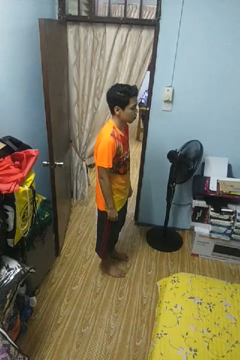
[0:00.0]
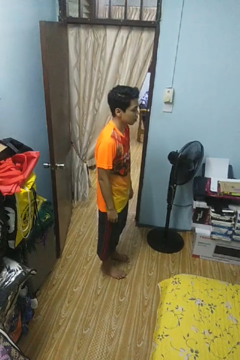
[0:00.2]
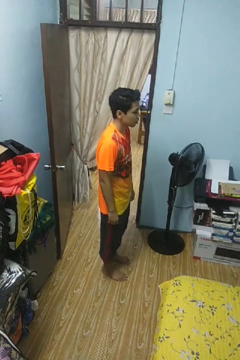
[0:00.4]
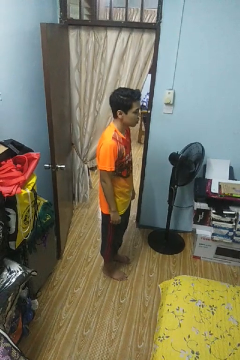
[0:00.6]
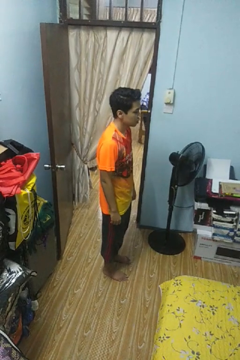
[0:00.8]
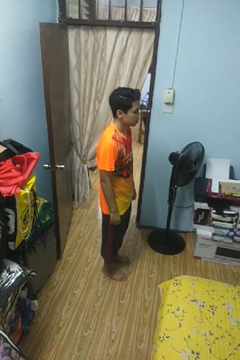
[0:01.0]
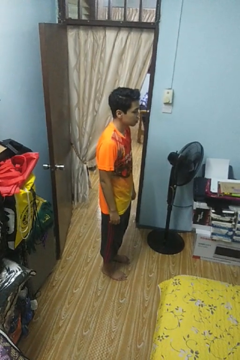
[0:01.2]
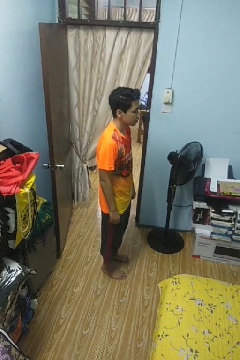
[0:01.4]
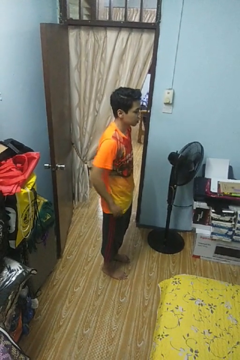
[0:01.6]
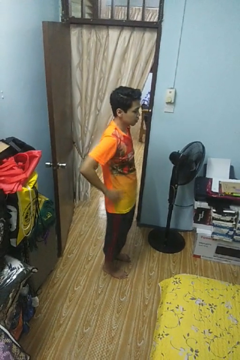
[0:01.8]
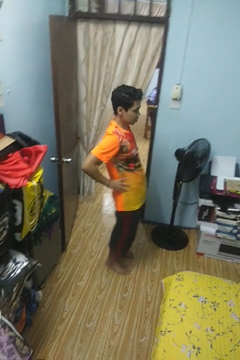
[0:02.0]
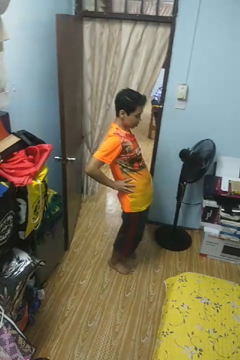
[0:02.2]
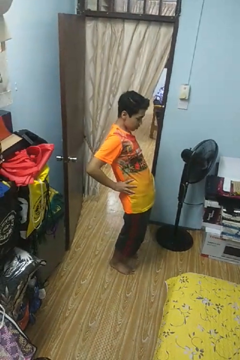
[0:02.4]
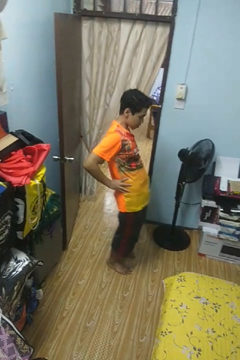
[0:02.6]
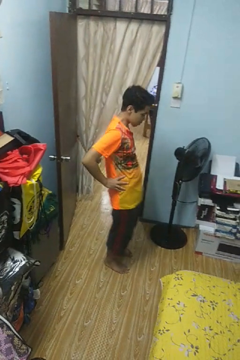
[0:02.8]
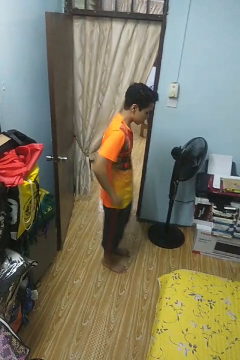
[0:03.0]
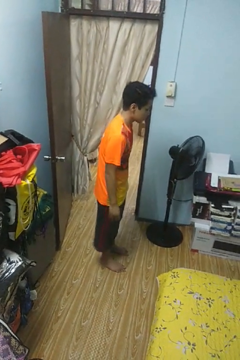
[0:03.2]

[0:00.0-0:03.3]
person stretches back

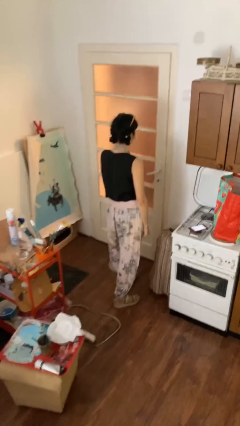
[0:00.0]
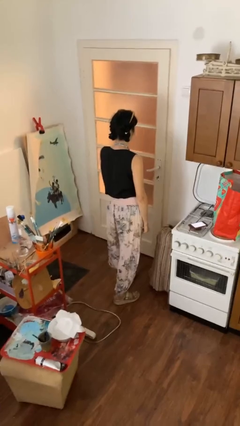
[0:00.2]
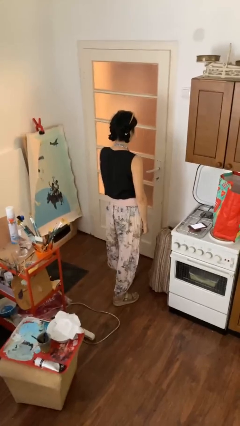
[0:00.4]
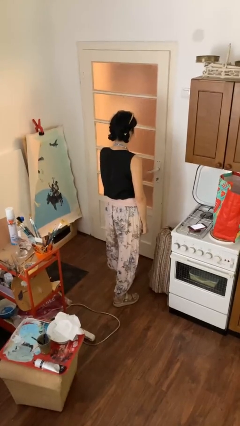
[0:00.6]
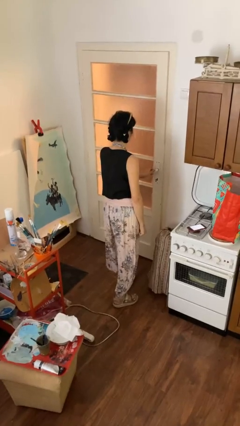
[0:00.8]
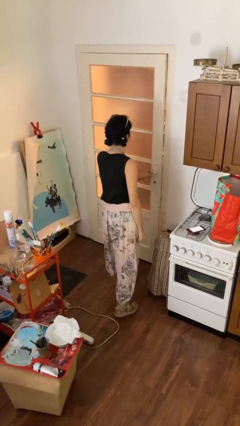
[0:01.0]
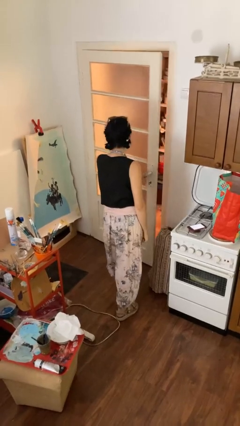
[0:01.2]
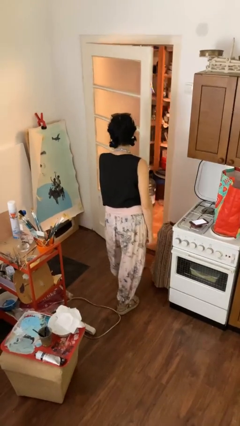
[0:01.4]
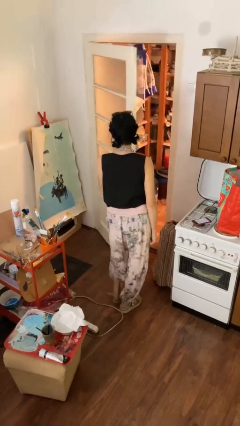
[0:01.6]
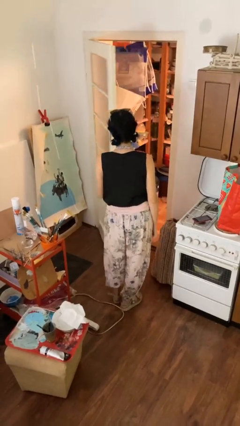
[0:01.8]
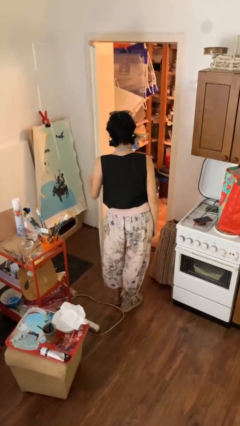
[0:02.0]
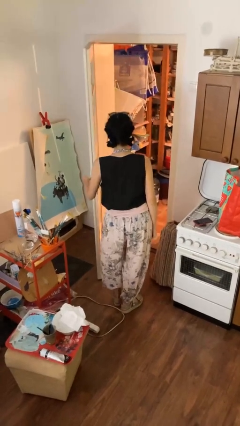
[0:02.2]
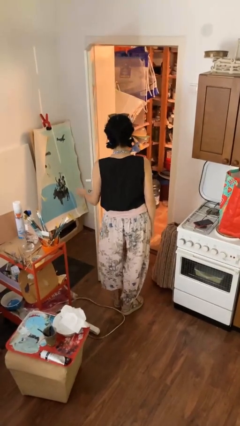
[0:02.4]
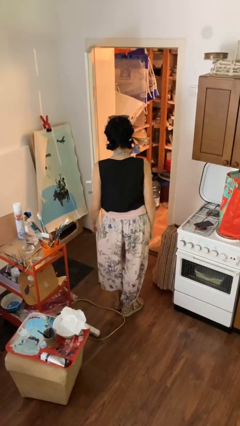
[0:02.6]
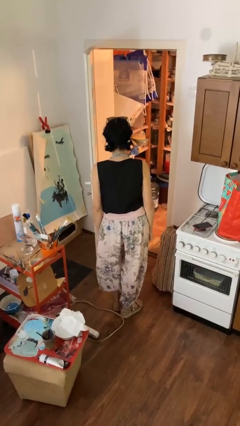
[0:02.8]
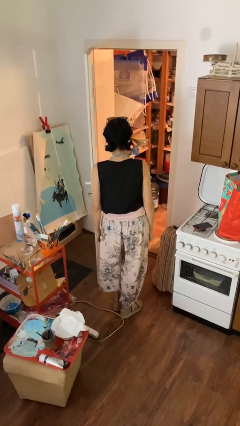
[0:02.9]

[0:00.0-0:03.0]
person opens facility door

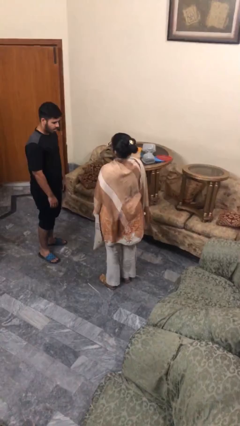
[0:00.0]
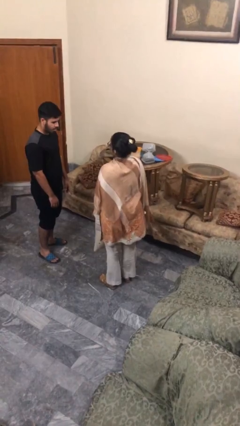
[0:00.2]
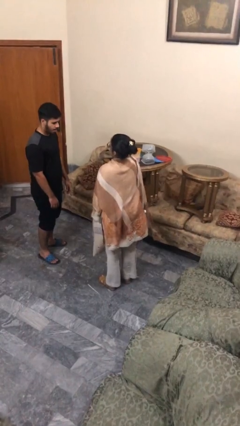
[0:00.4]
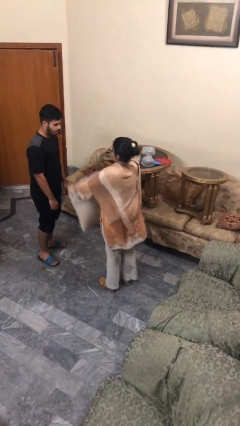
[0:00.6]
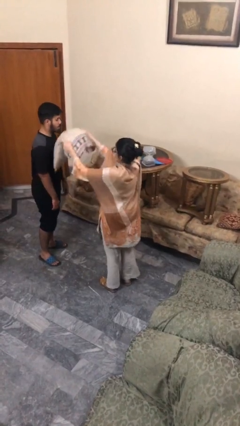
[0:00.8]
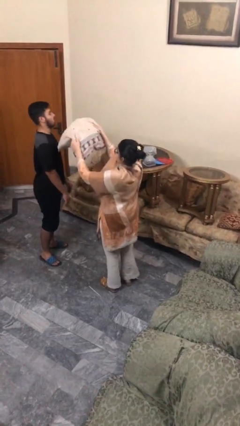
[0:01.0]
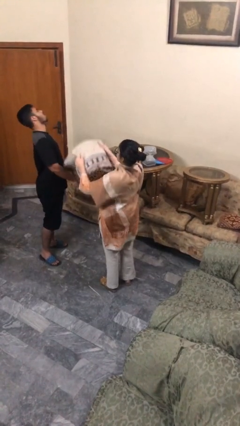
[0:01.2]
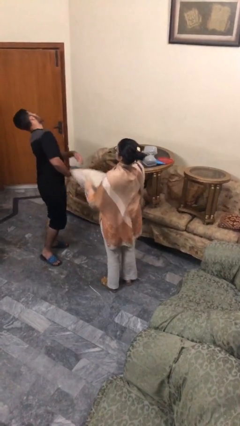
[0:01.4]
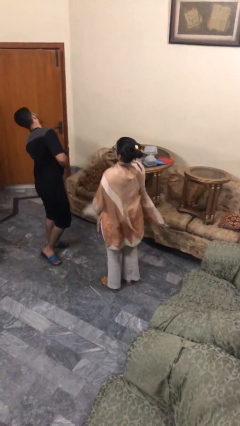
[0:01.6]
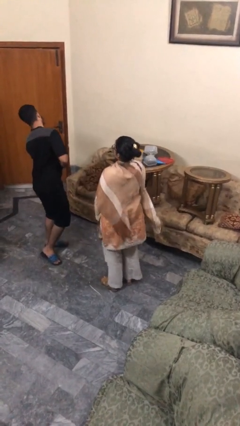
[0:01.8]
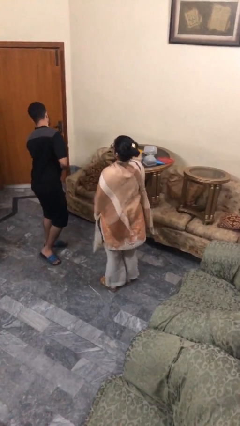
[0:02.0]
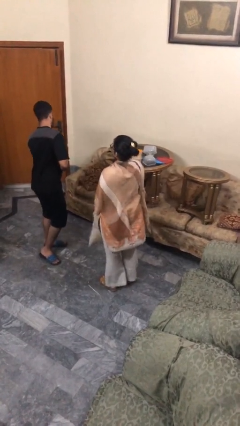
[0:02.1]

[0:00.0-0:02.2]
person hits person with pillow

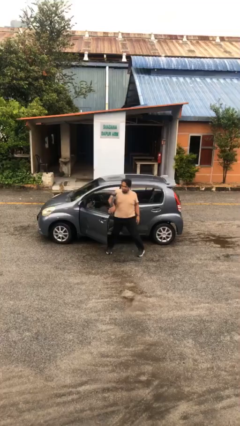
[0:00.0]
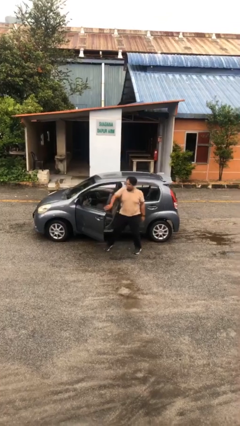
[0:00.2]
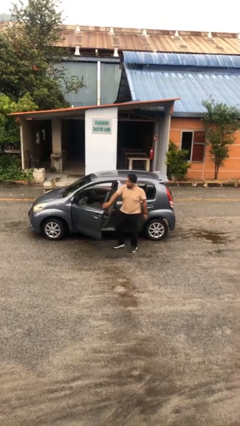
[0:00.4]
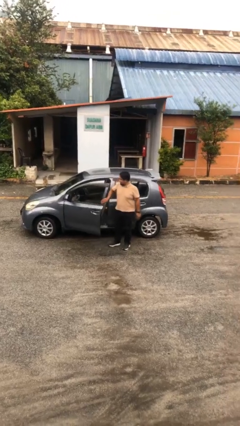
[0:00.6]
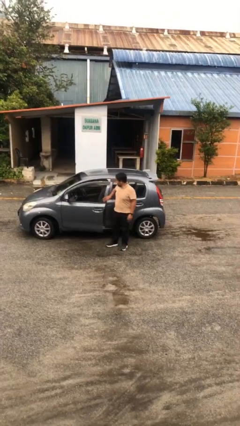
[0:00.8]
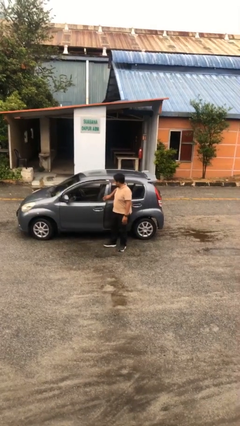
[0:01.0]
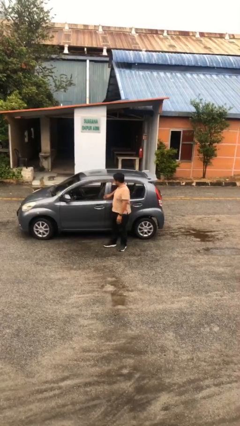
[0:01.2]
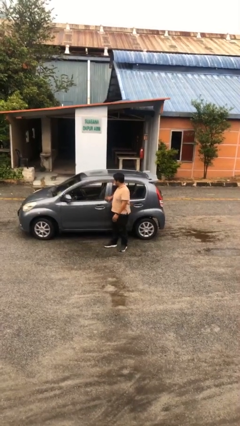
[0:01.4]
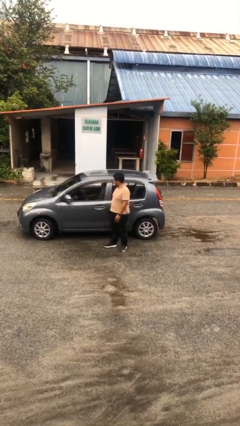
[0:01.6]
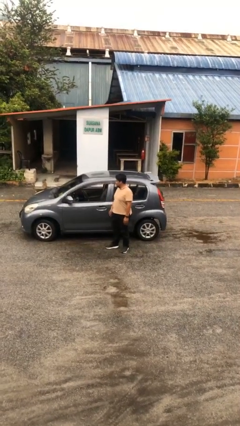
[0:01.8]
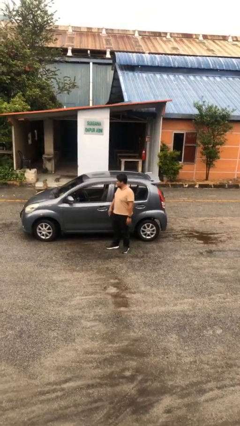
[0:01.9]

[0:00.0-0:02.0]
person closes car door

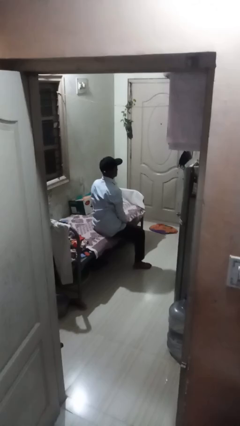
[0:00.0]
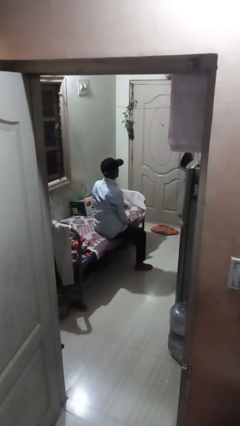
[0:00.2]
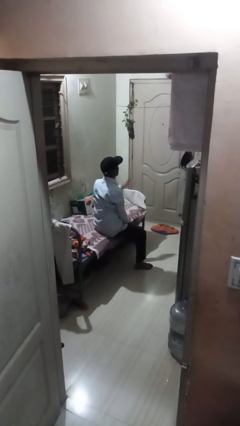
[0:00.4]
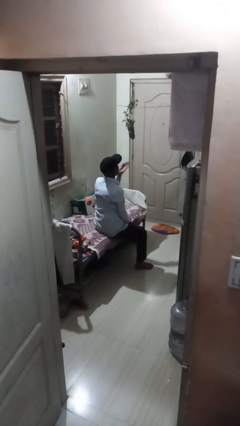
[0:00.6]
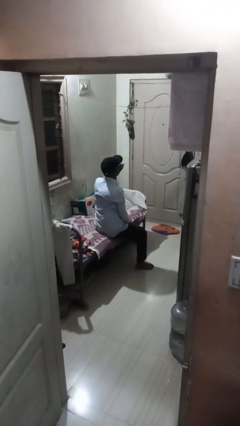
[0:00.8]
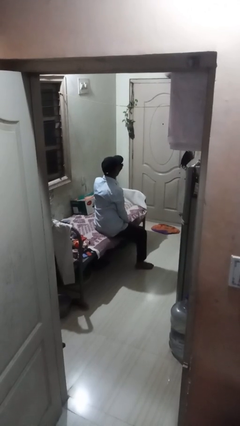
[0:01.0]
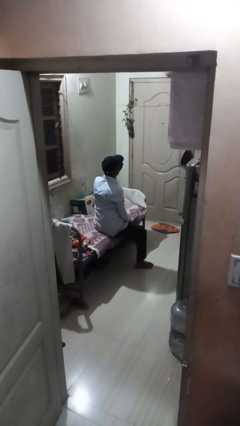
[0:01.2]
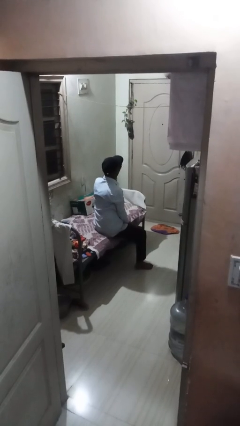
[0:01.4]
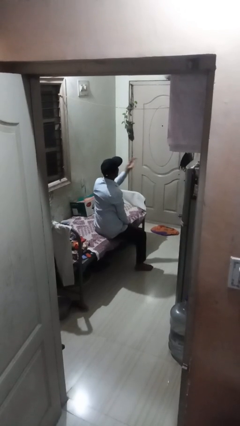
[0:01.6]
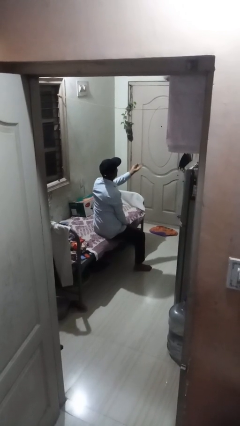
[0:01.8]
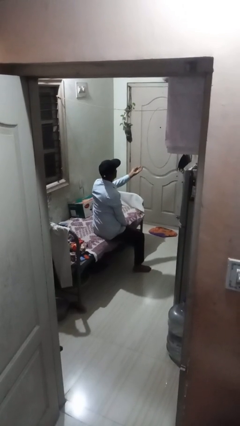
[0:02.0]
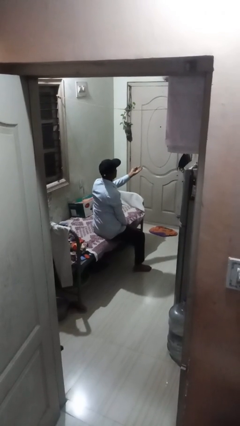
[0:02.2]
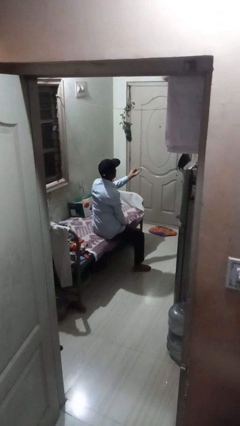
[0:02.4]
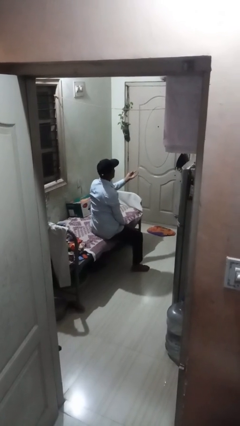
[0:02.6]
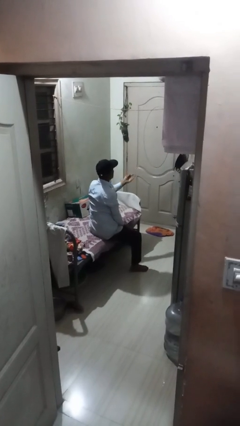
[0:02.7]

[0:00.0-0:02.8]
person gestures blow kiss

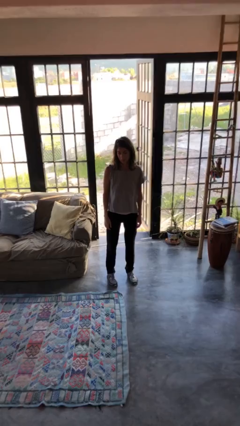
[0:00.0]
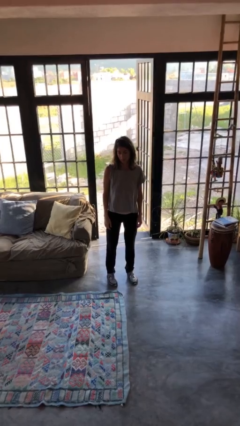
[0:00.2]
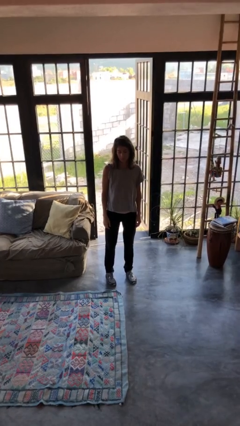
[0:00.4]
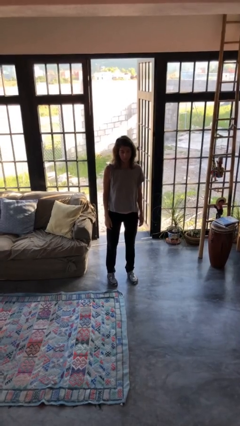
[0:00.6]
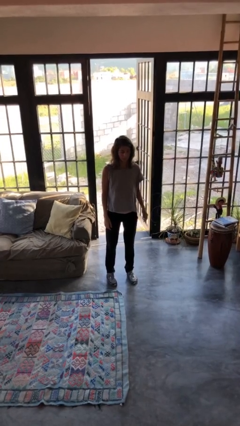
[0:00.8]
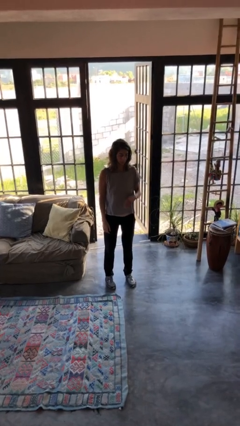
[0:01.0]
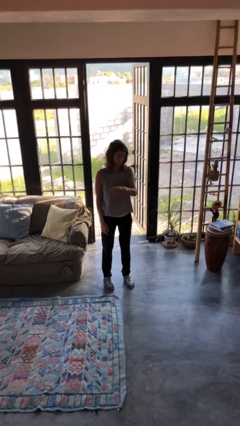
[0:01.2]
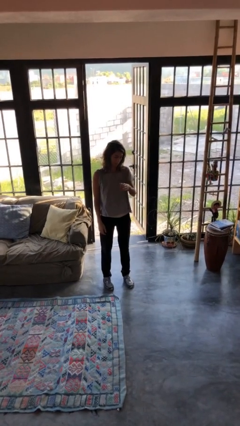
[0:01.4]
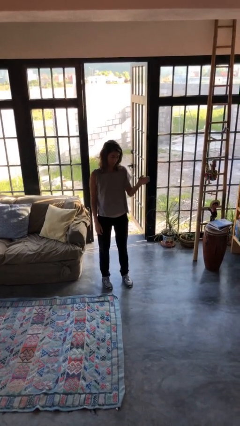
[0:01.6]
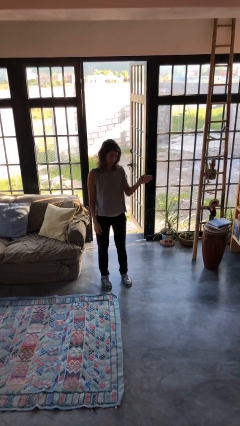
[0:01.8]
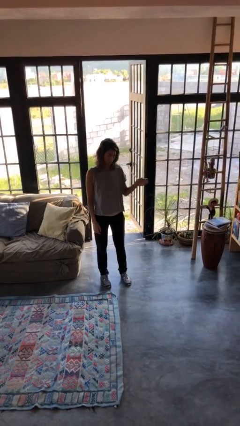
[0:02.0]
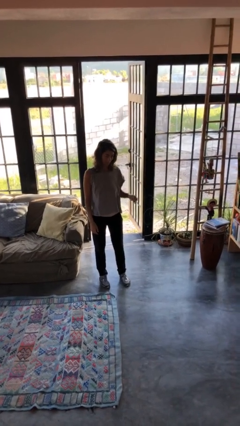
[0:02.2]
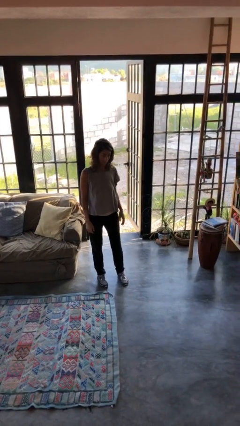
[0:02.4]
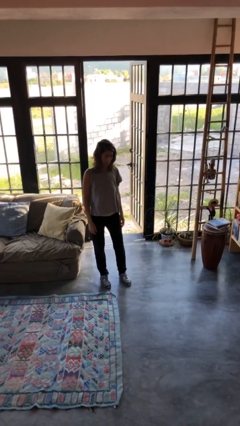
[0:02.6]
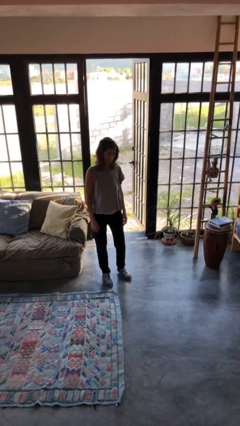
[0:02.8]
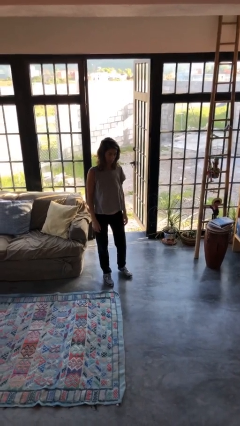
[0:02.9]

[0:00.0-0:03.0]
person gestures swipe left

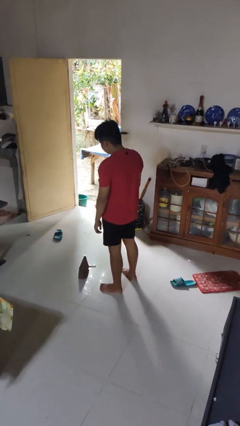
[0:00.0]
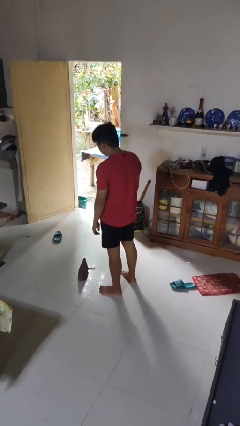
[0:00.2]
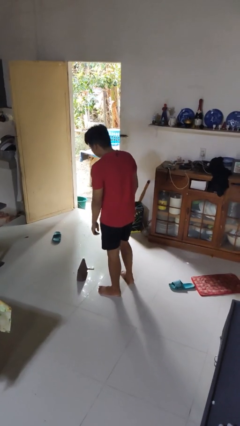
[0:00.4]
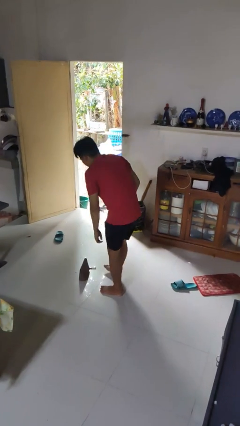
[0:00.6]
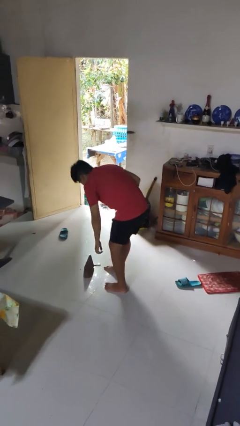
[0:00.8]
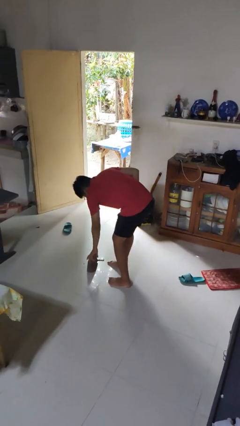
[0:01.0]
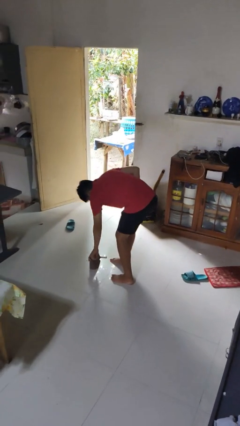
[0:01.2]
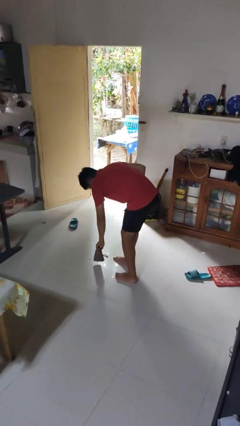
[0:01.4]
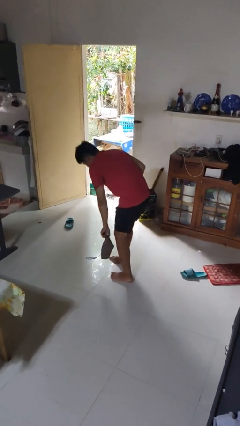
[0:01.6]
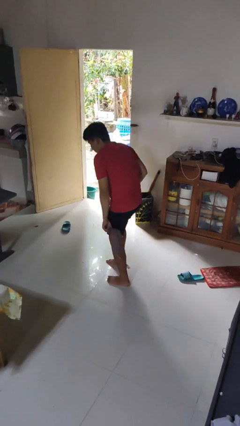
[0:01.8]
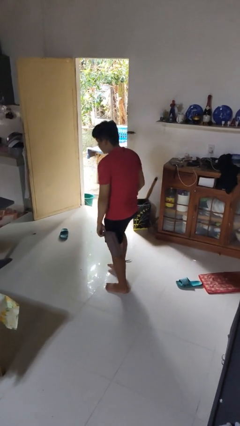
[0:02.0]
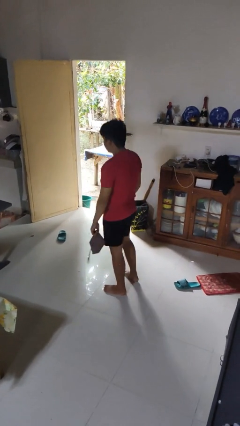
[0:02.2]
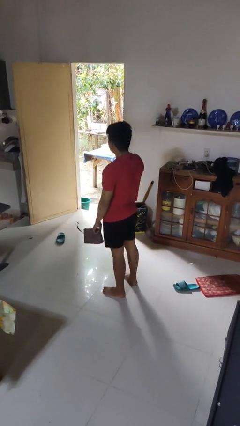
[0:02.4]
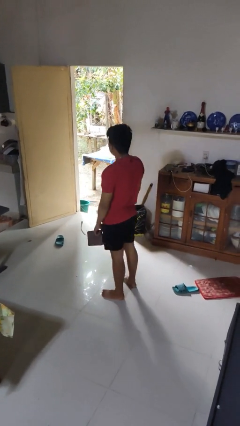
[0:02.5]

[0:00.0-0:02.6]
person picks up object from floor
